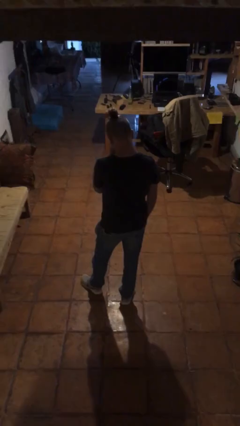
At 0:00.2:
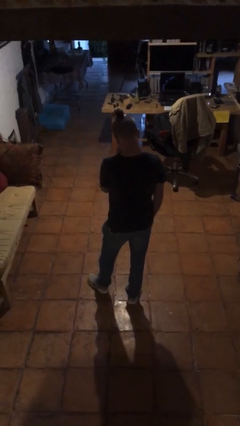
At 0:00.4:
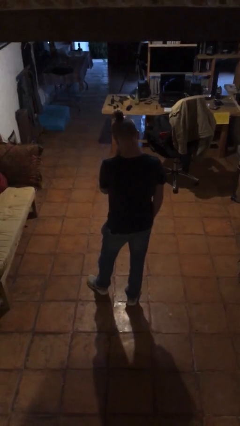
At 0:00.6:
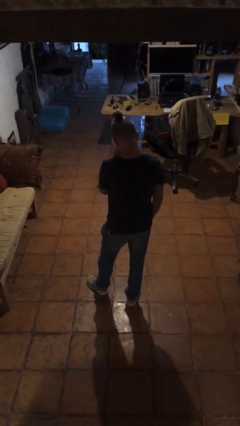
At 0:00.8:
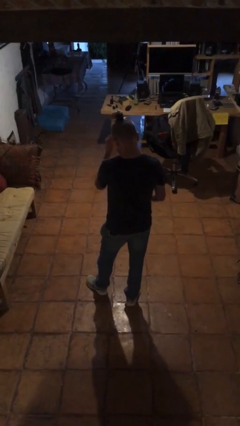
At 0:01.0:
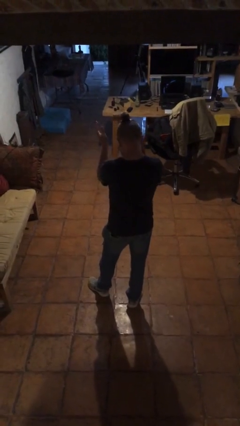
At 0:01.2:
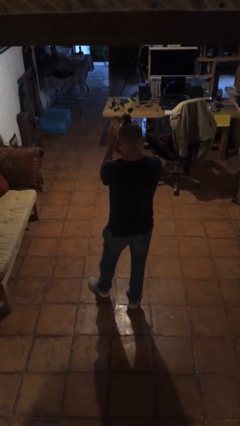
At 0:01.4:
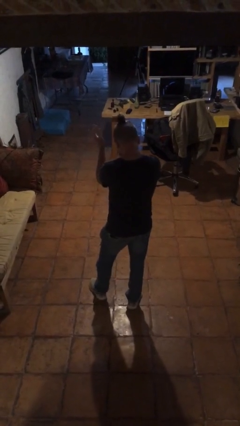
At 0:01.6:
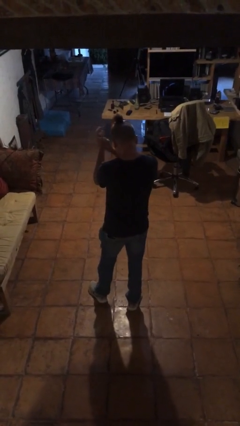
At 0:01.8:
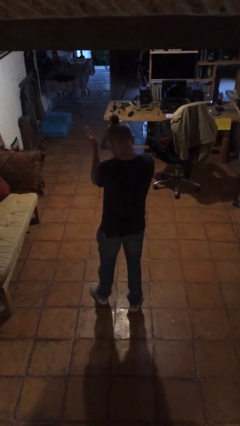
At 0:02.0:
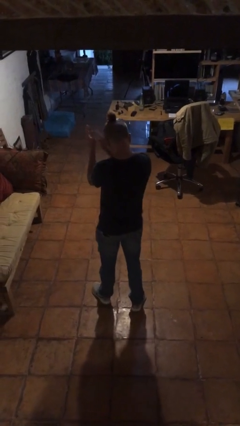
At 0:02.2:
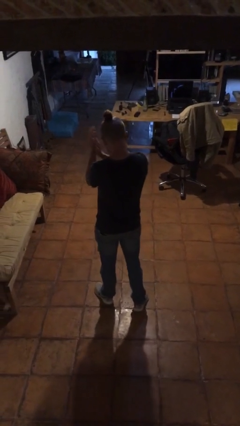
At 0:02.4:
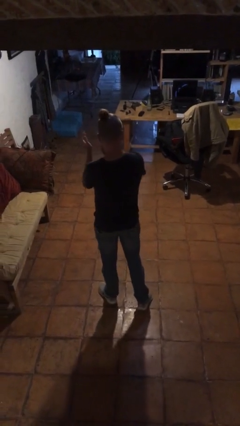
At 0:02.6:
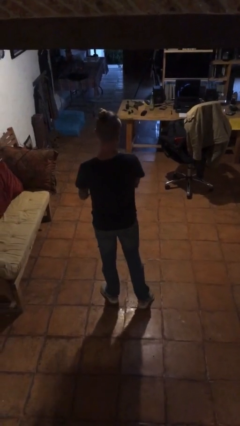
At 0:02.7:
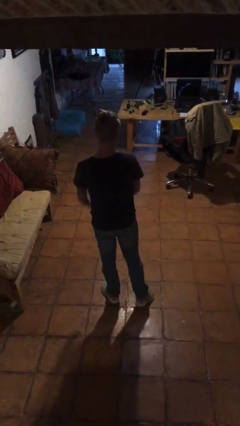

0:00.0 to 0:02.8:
person claps hands

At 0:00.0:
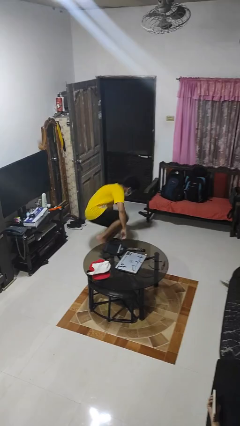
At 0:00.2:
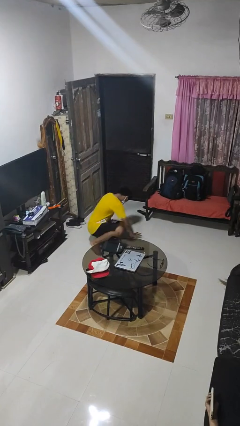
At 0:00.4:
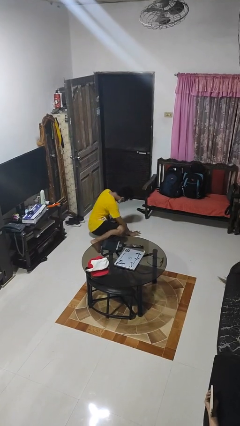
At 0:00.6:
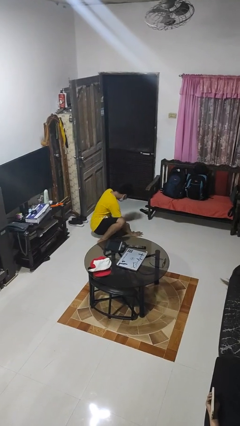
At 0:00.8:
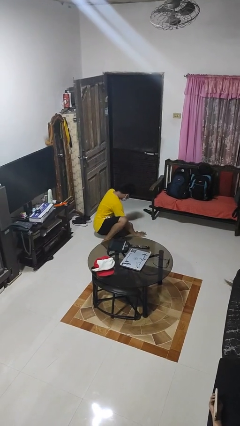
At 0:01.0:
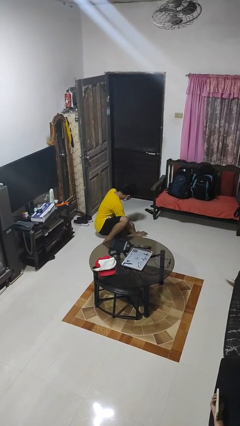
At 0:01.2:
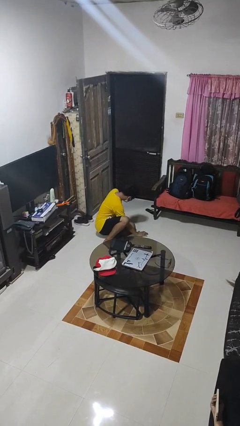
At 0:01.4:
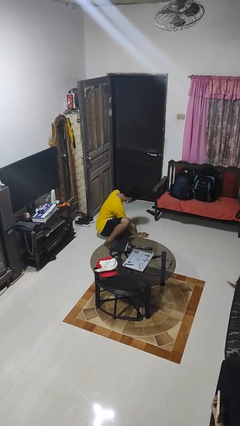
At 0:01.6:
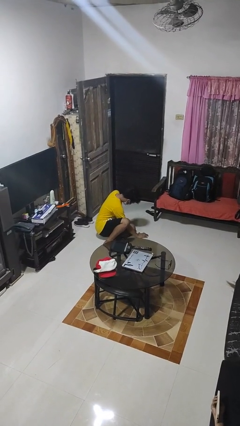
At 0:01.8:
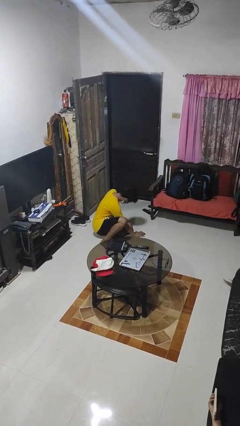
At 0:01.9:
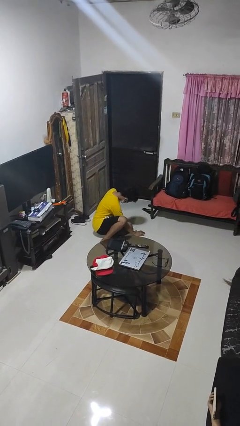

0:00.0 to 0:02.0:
person lies down on floor

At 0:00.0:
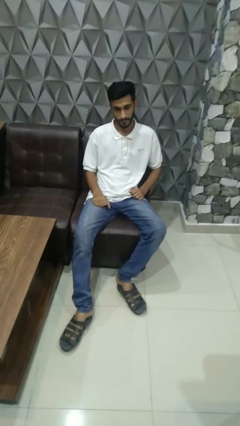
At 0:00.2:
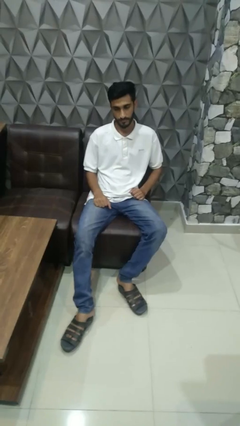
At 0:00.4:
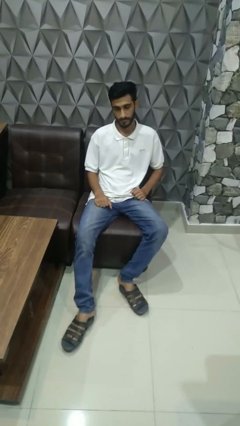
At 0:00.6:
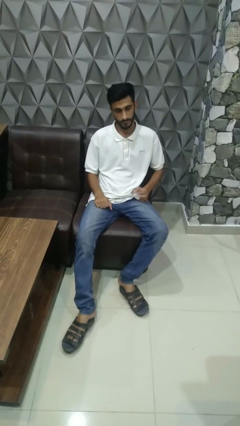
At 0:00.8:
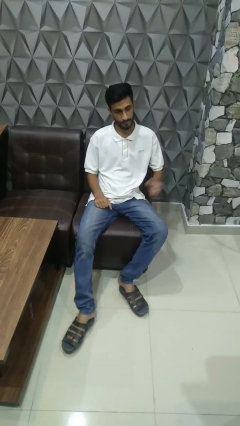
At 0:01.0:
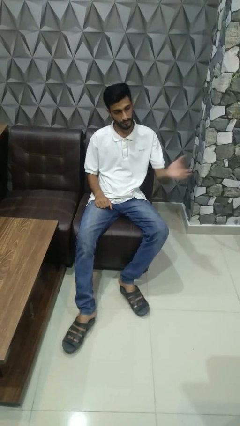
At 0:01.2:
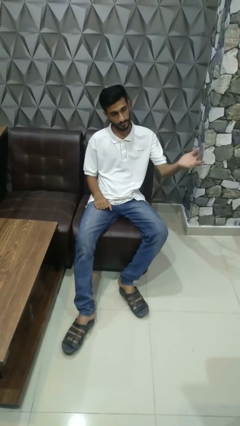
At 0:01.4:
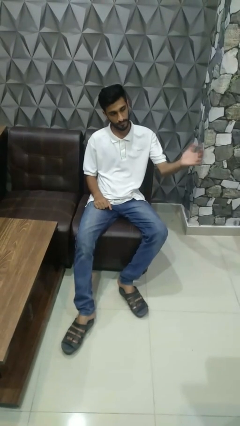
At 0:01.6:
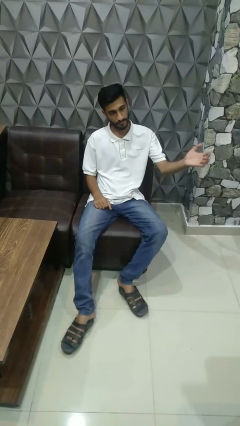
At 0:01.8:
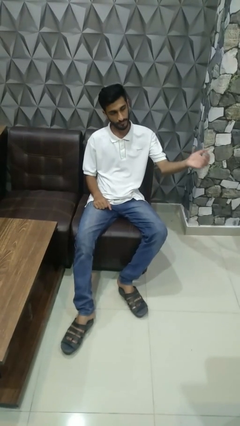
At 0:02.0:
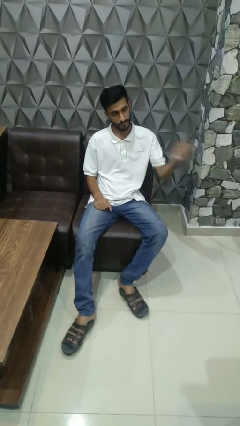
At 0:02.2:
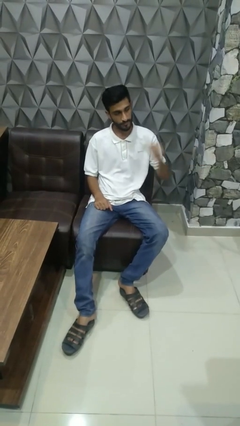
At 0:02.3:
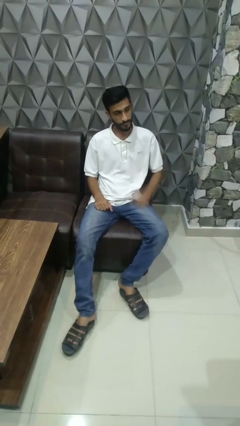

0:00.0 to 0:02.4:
person gestures come here

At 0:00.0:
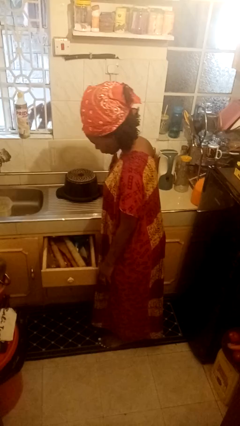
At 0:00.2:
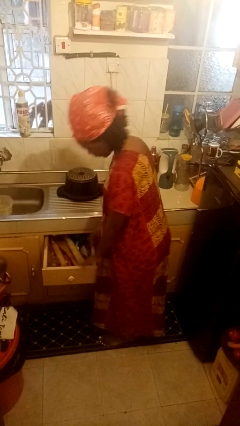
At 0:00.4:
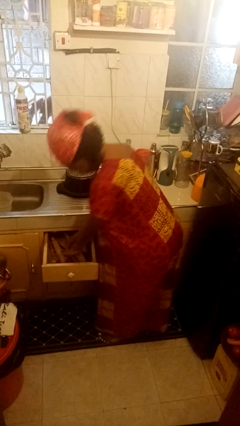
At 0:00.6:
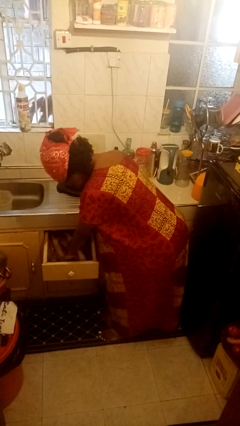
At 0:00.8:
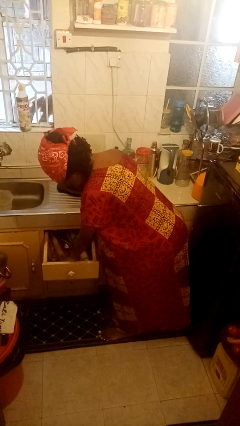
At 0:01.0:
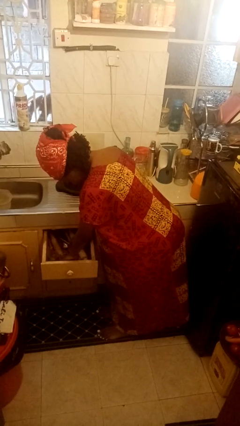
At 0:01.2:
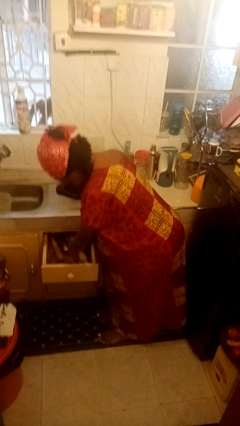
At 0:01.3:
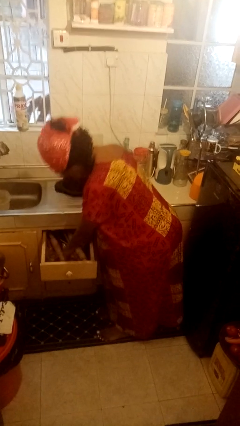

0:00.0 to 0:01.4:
person searches in kitchen drawer

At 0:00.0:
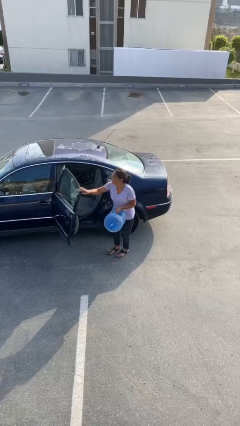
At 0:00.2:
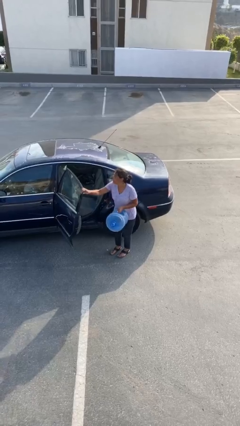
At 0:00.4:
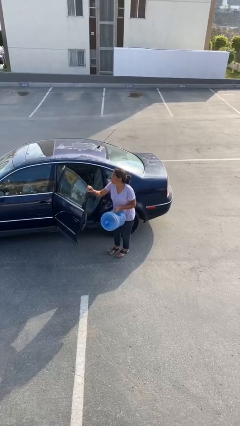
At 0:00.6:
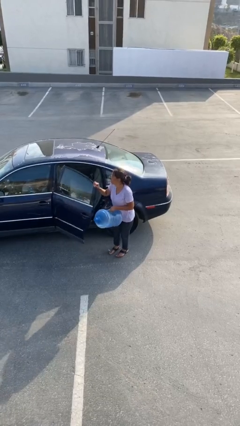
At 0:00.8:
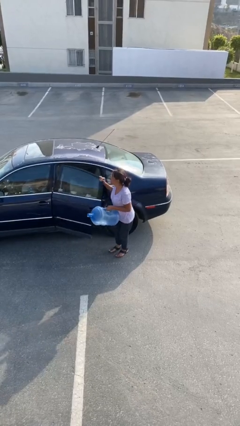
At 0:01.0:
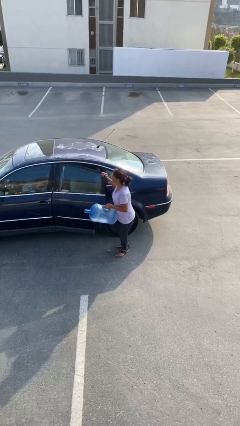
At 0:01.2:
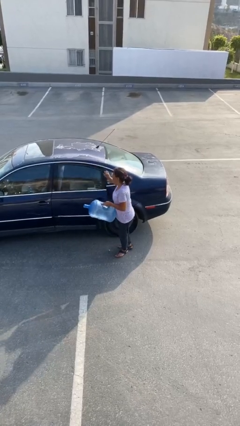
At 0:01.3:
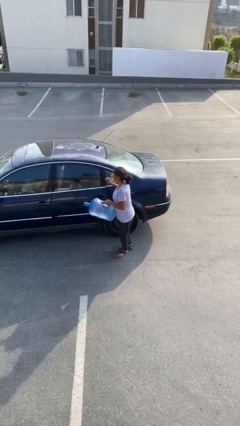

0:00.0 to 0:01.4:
person closes car door

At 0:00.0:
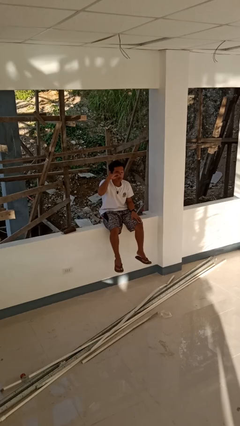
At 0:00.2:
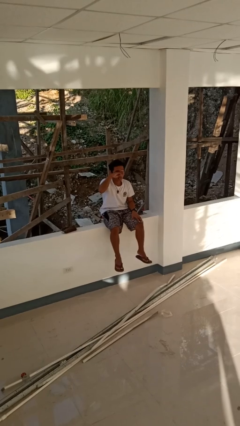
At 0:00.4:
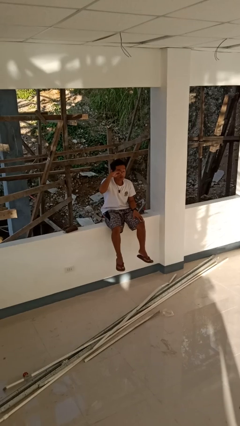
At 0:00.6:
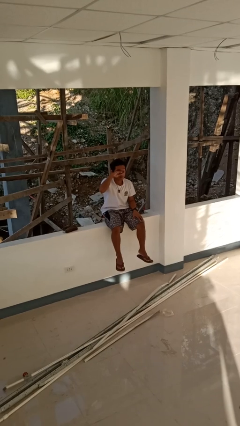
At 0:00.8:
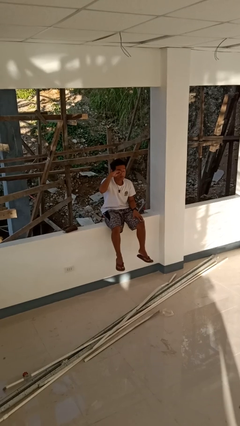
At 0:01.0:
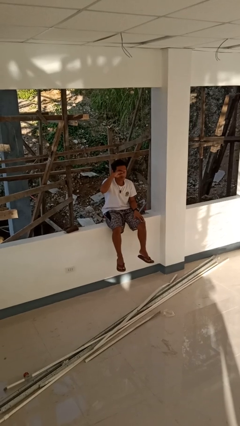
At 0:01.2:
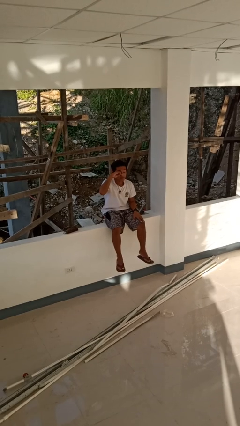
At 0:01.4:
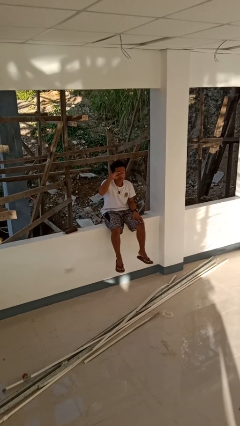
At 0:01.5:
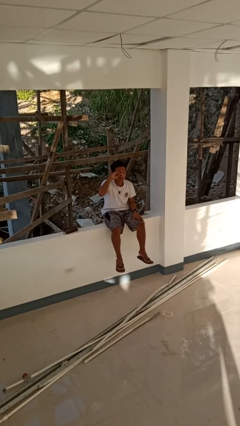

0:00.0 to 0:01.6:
person rubs eyes

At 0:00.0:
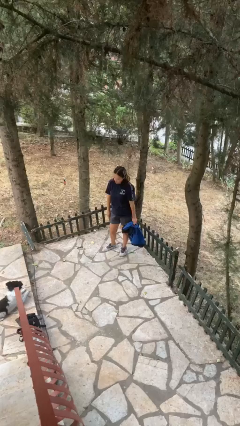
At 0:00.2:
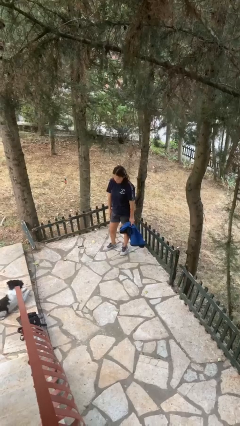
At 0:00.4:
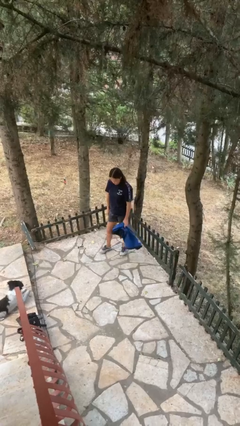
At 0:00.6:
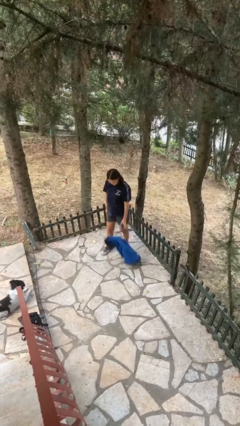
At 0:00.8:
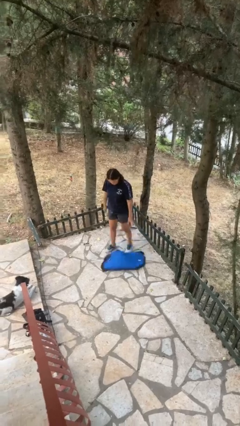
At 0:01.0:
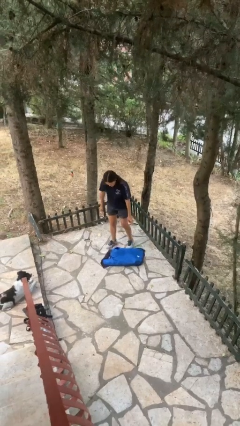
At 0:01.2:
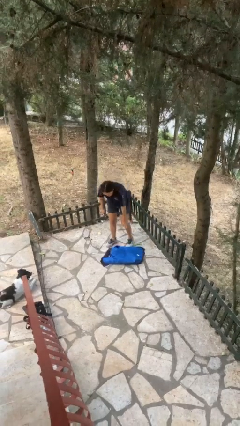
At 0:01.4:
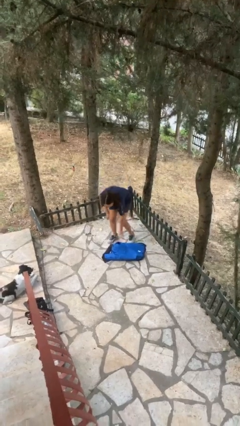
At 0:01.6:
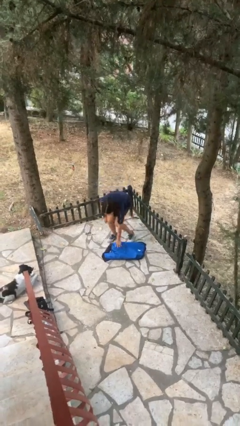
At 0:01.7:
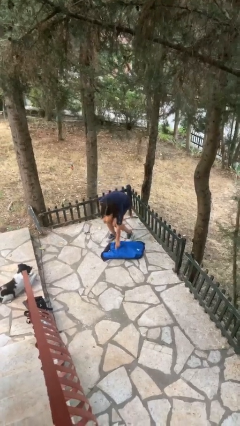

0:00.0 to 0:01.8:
person drops object

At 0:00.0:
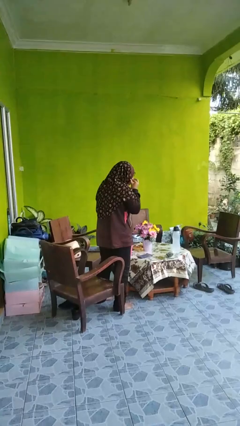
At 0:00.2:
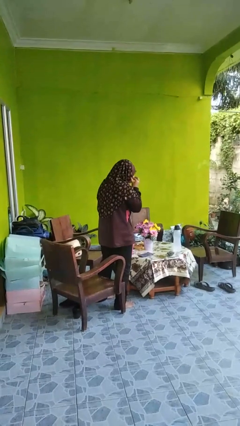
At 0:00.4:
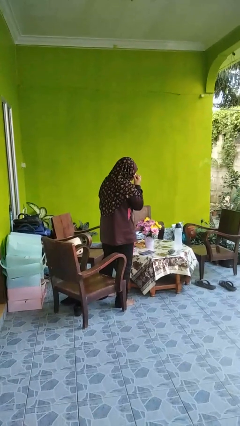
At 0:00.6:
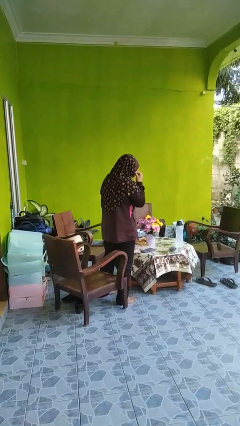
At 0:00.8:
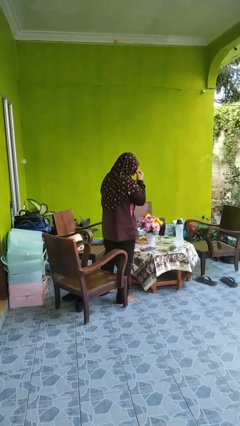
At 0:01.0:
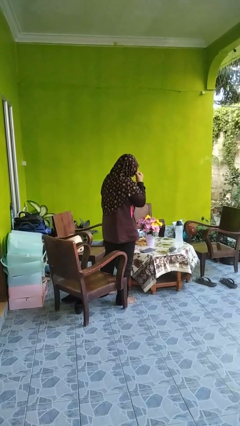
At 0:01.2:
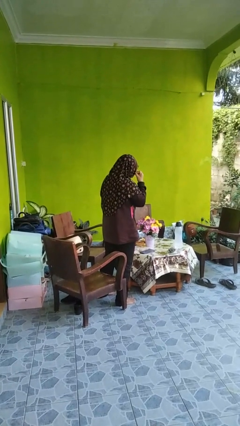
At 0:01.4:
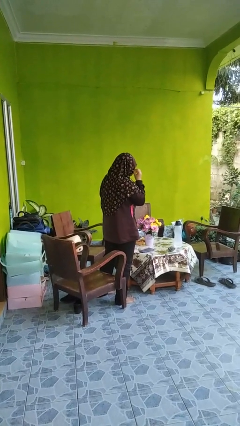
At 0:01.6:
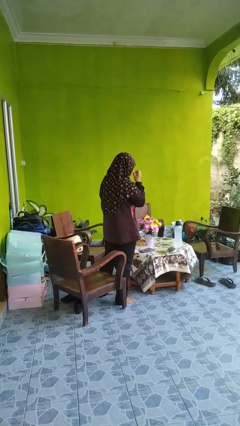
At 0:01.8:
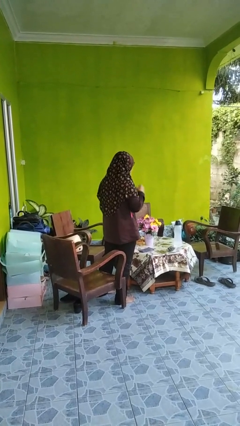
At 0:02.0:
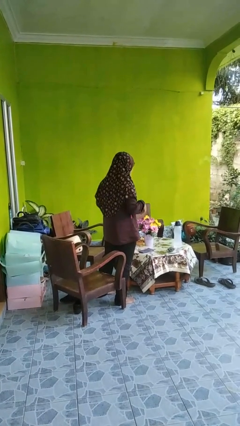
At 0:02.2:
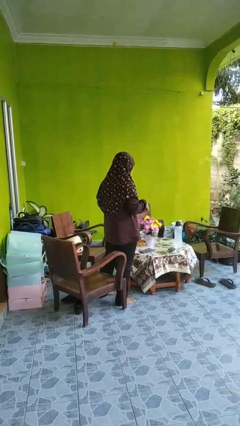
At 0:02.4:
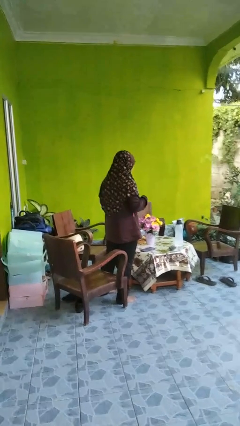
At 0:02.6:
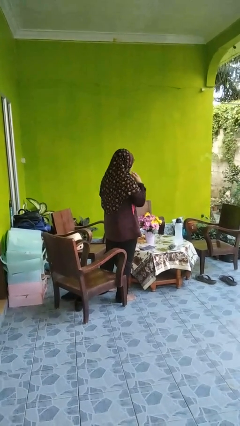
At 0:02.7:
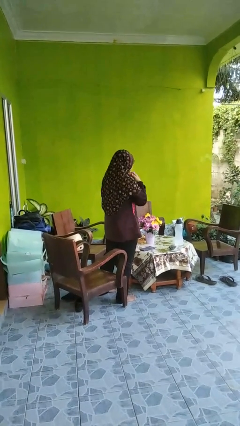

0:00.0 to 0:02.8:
person puts on headphones

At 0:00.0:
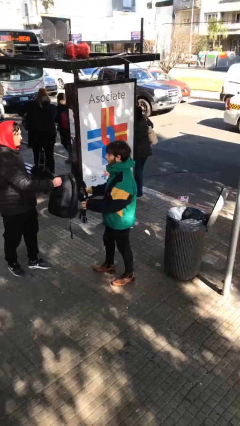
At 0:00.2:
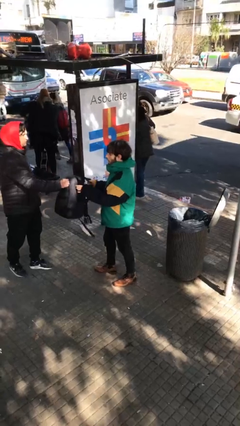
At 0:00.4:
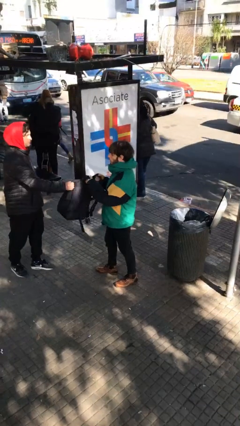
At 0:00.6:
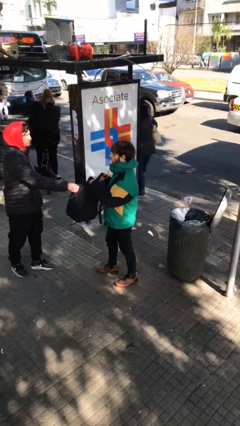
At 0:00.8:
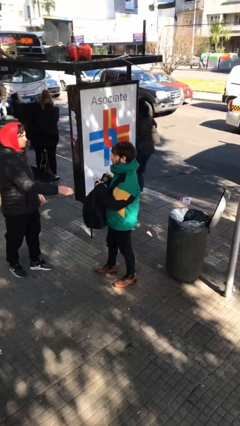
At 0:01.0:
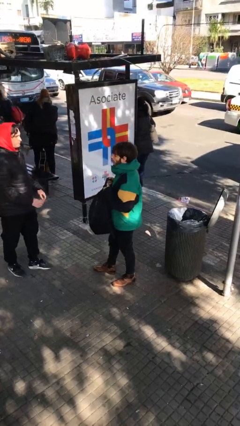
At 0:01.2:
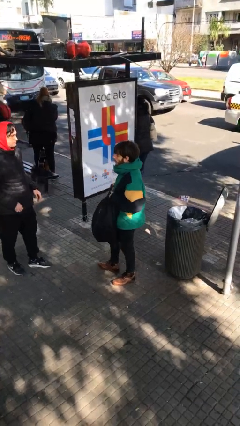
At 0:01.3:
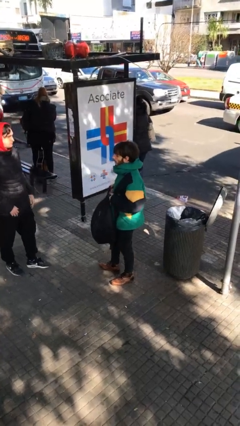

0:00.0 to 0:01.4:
person transfers object to person
